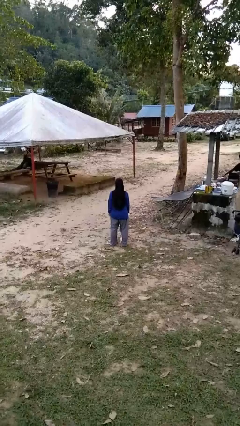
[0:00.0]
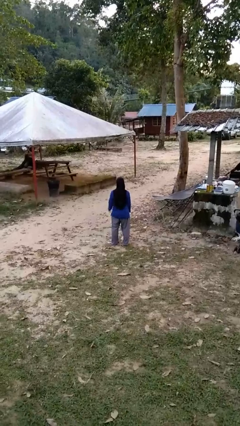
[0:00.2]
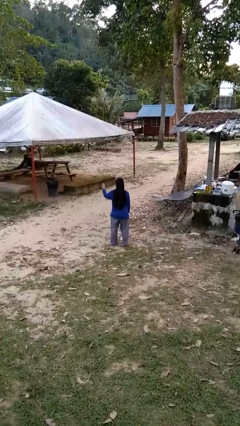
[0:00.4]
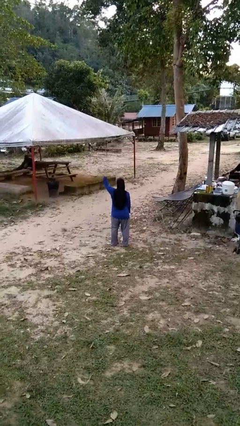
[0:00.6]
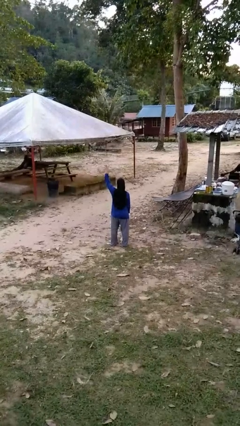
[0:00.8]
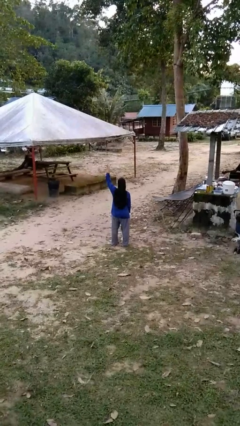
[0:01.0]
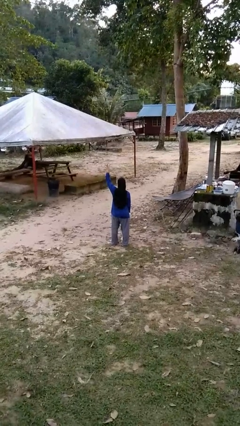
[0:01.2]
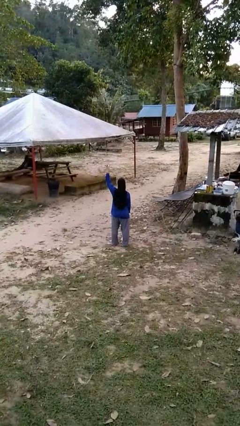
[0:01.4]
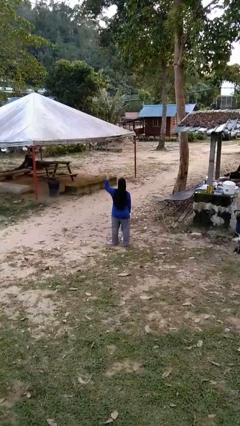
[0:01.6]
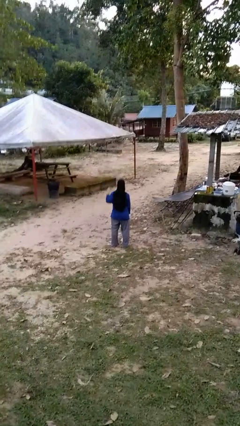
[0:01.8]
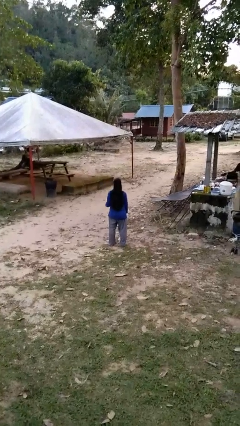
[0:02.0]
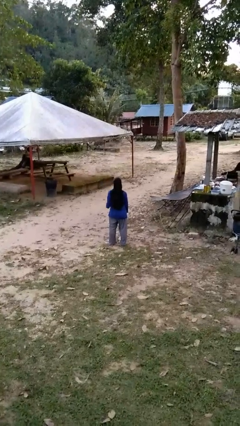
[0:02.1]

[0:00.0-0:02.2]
person gestures number four

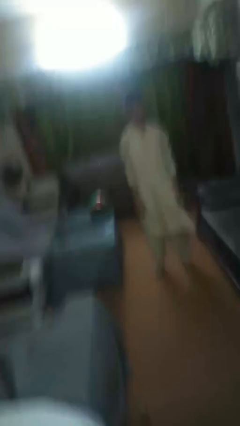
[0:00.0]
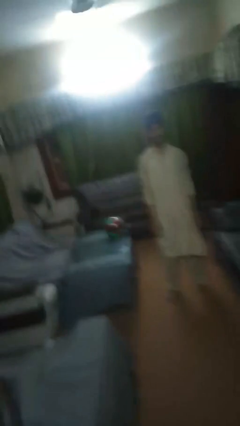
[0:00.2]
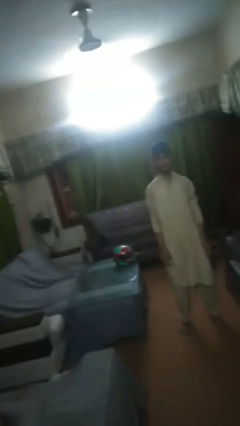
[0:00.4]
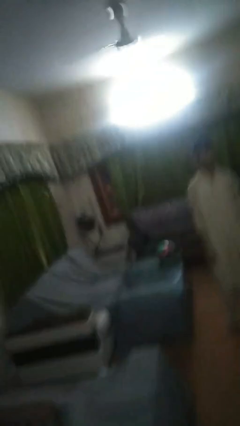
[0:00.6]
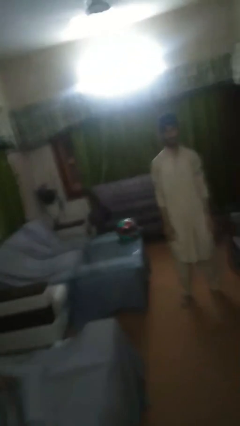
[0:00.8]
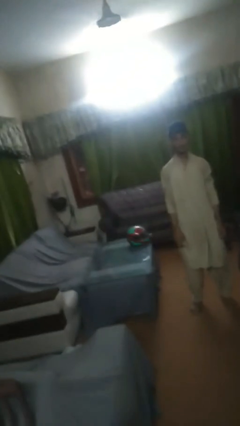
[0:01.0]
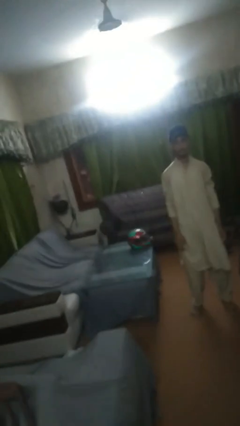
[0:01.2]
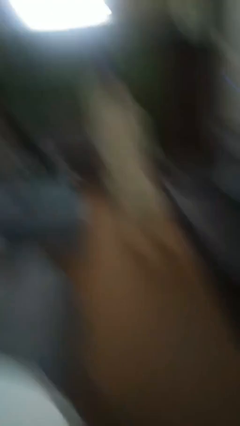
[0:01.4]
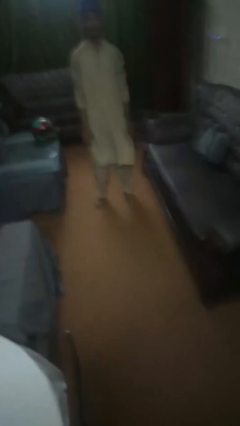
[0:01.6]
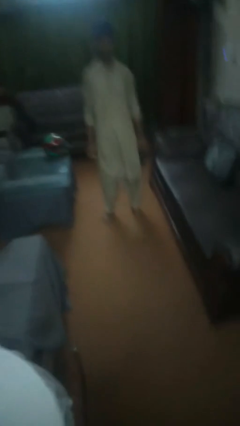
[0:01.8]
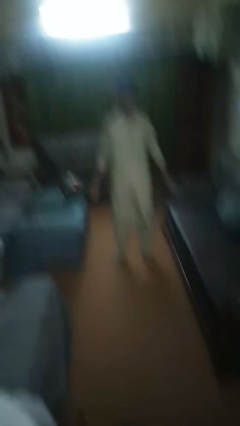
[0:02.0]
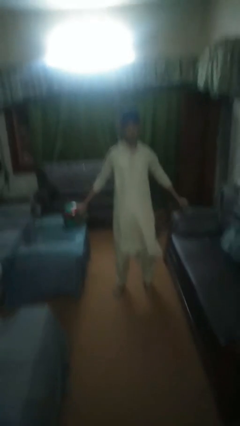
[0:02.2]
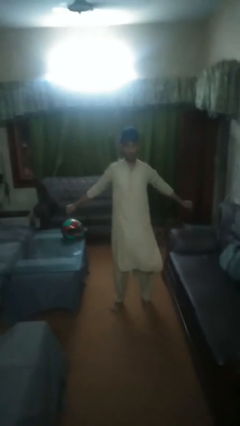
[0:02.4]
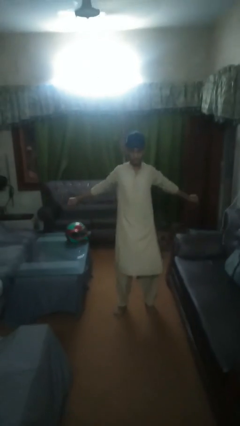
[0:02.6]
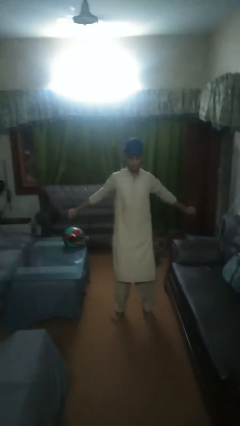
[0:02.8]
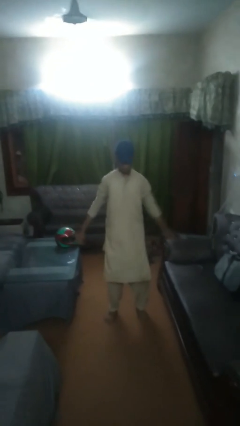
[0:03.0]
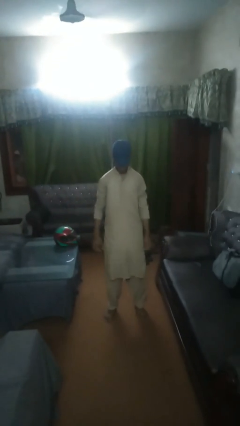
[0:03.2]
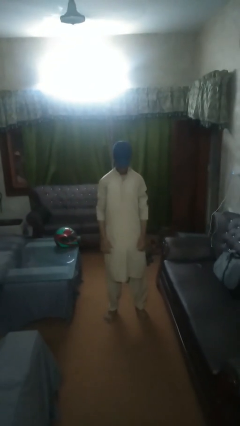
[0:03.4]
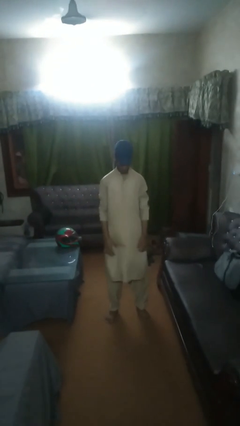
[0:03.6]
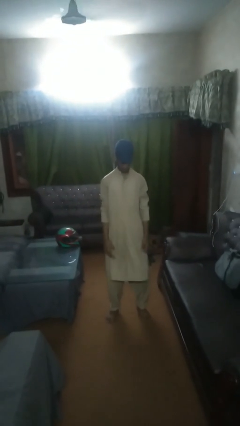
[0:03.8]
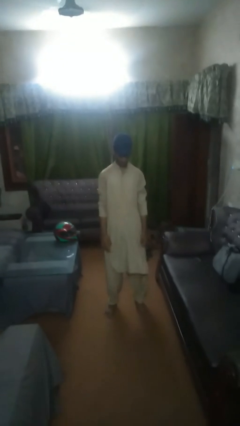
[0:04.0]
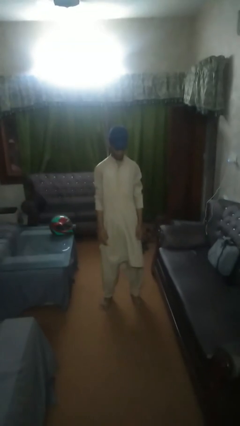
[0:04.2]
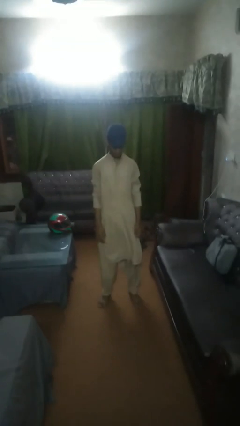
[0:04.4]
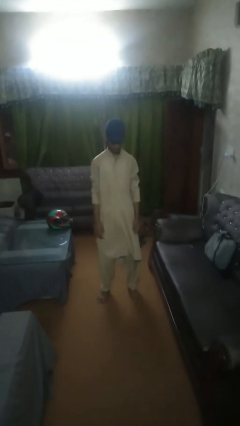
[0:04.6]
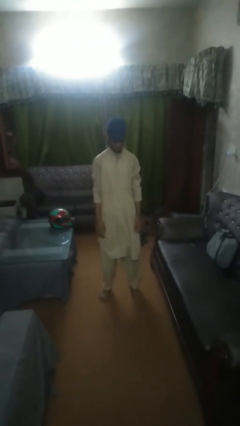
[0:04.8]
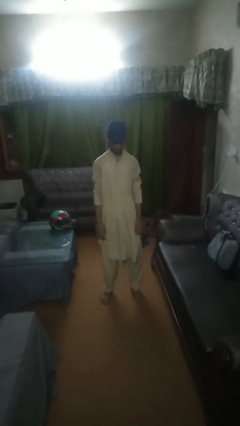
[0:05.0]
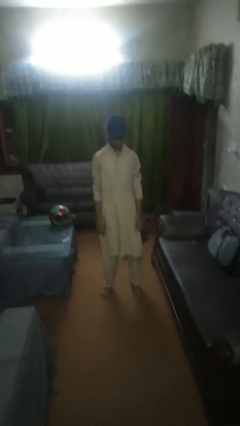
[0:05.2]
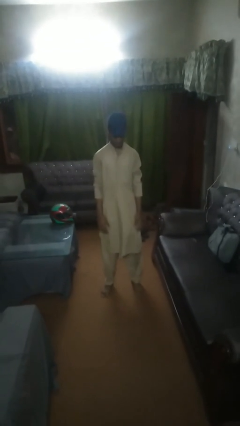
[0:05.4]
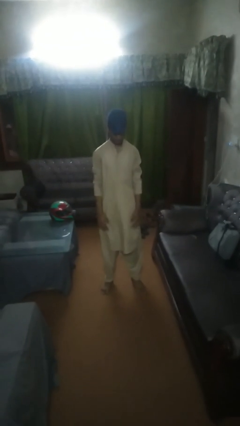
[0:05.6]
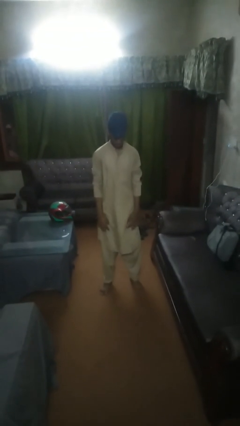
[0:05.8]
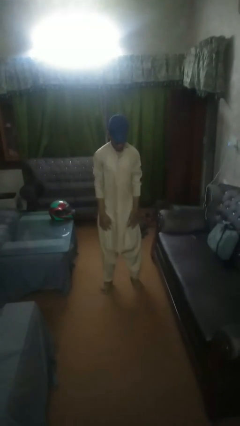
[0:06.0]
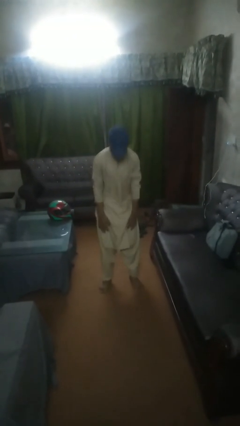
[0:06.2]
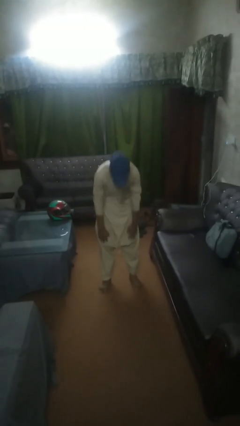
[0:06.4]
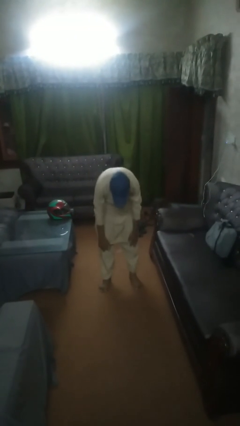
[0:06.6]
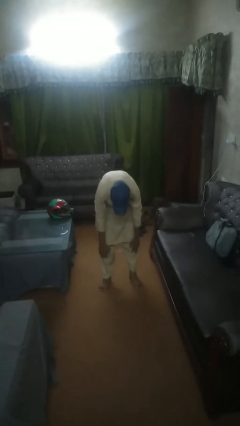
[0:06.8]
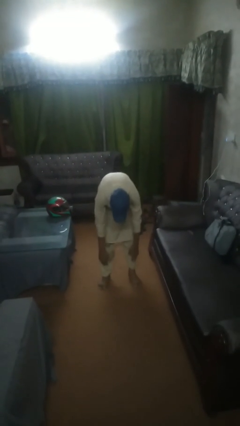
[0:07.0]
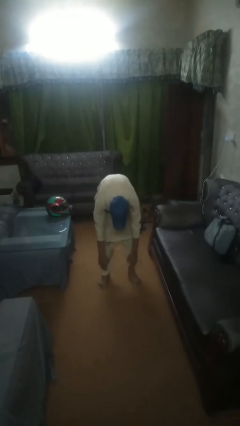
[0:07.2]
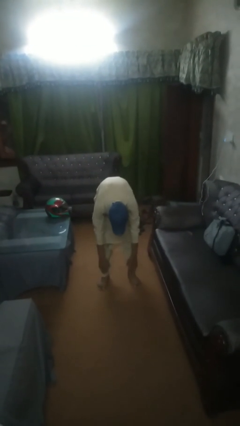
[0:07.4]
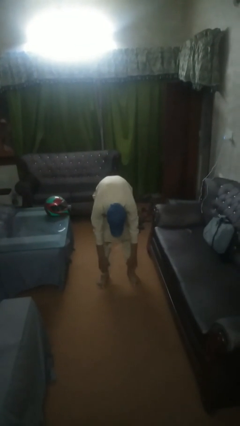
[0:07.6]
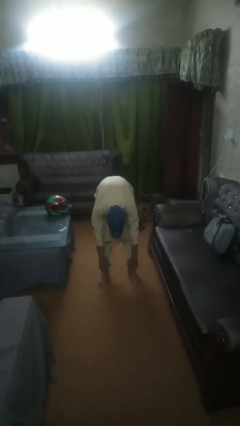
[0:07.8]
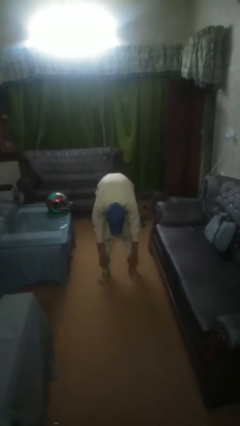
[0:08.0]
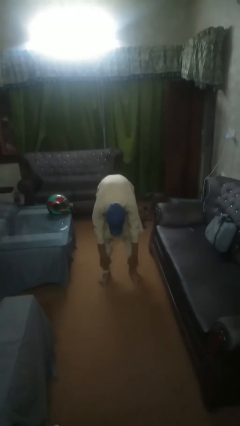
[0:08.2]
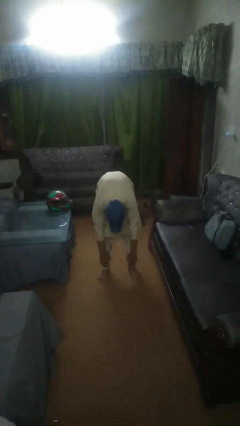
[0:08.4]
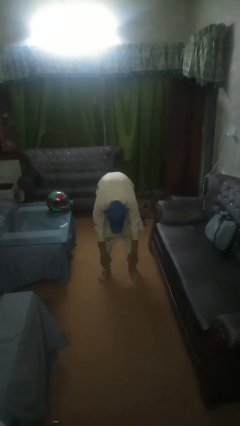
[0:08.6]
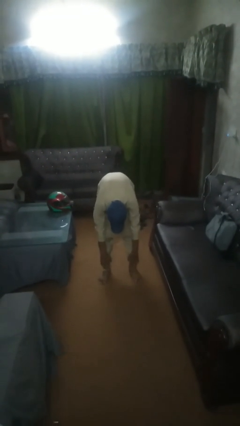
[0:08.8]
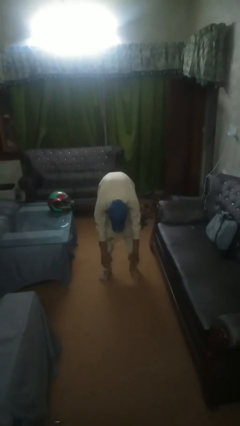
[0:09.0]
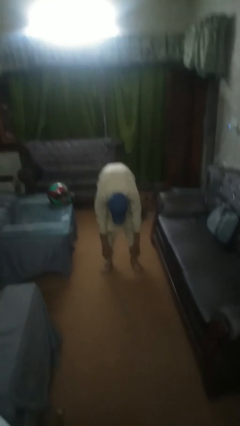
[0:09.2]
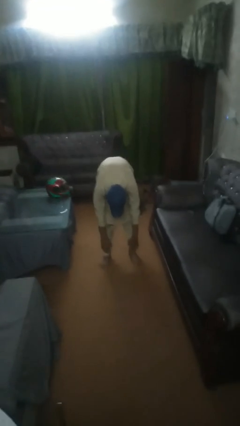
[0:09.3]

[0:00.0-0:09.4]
person exercises with plank

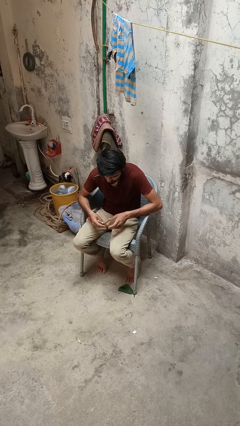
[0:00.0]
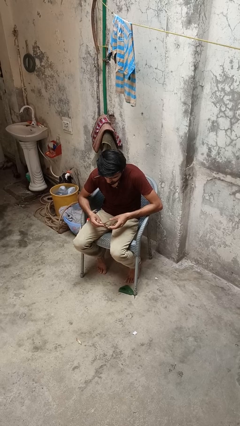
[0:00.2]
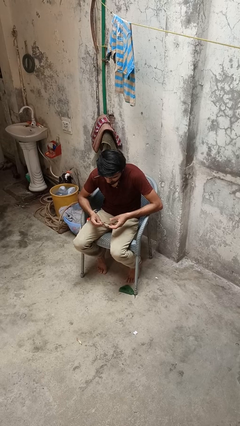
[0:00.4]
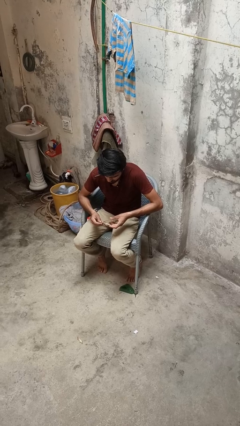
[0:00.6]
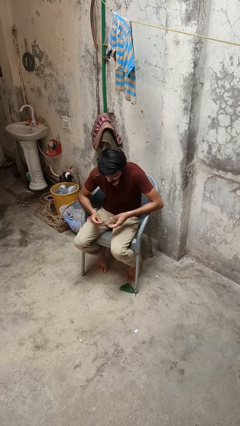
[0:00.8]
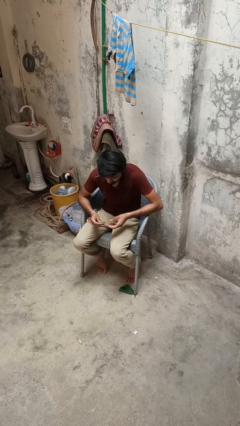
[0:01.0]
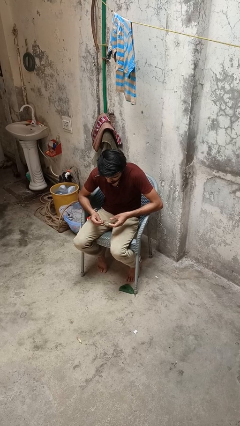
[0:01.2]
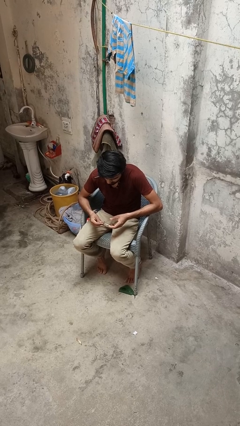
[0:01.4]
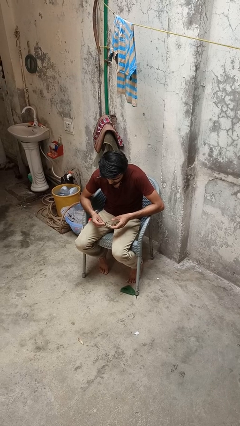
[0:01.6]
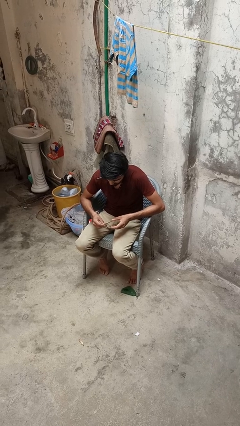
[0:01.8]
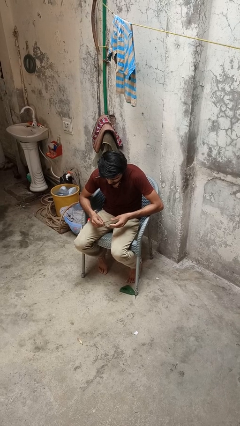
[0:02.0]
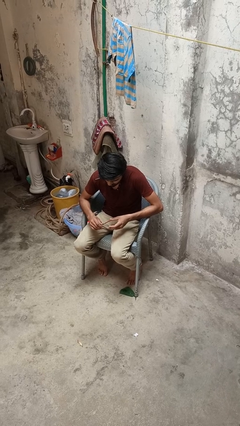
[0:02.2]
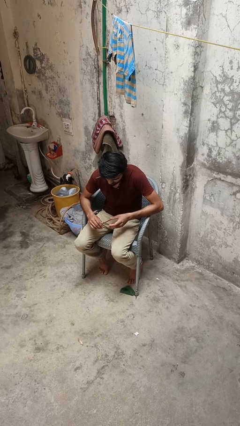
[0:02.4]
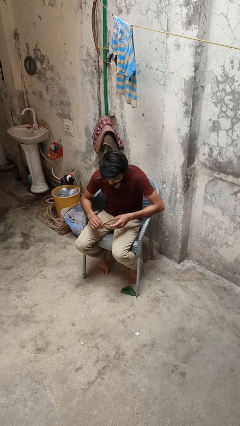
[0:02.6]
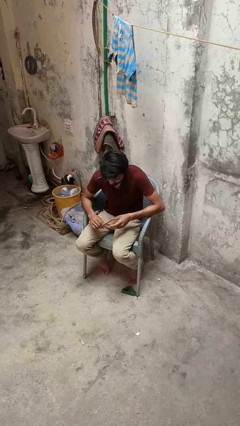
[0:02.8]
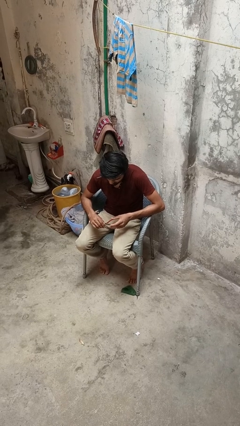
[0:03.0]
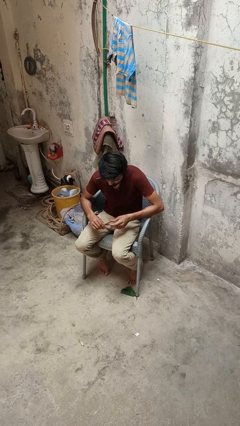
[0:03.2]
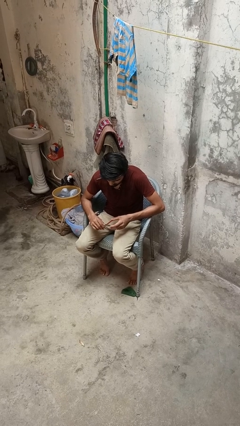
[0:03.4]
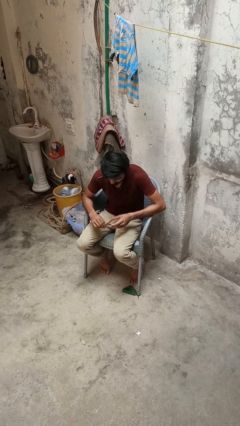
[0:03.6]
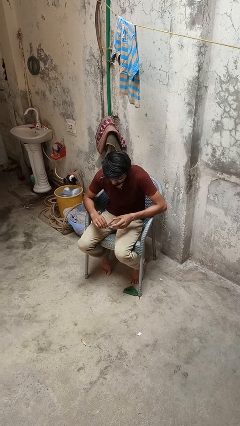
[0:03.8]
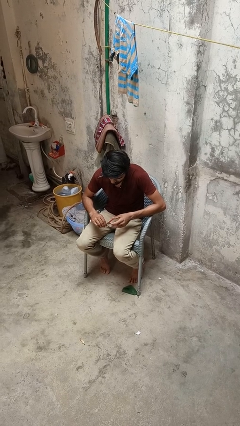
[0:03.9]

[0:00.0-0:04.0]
person clips fingernails

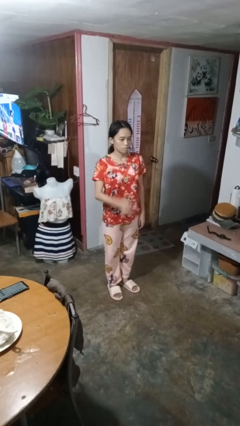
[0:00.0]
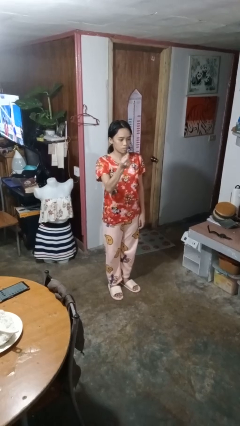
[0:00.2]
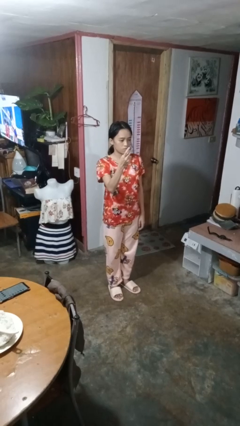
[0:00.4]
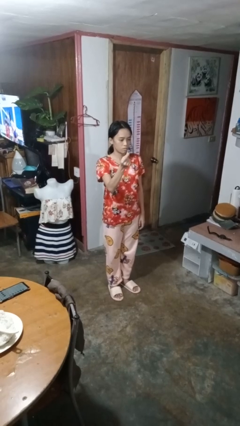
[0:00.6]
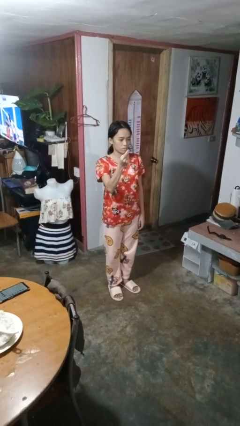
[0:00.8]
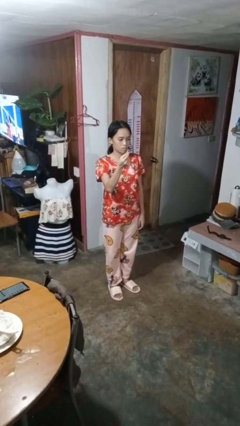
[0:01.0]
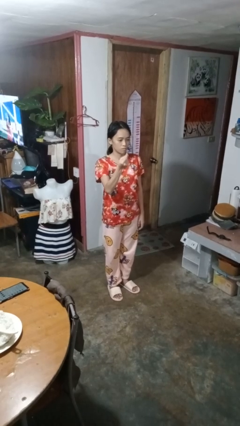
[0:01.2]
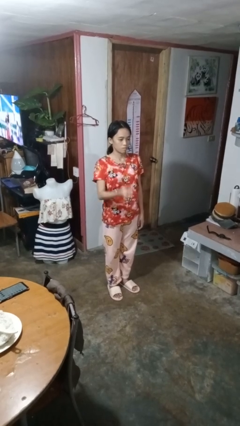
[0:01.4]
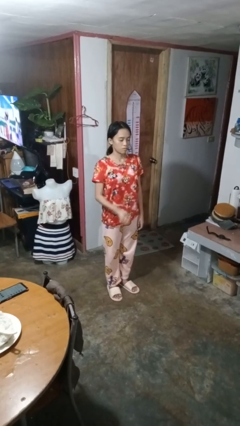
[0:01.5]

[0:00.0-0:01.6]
person snaps fingers

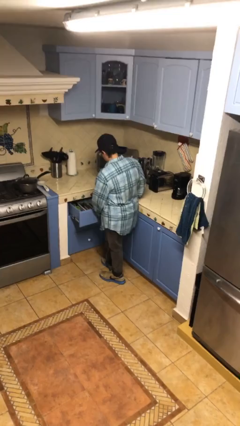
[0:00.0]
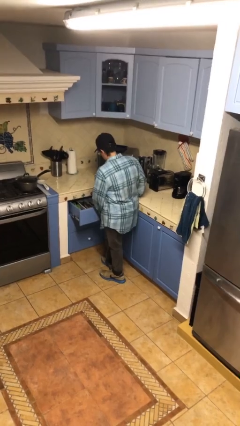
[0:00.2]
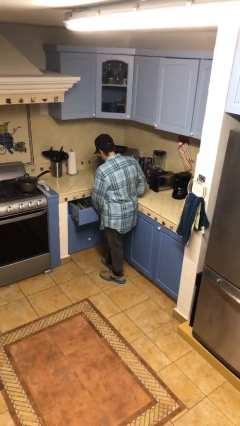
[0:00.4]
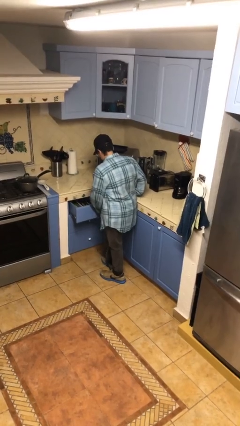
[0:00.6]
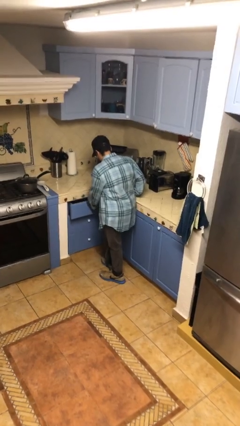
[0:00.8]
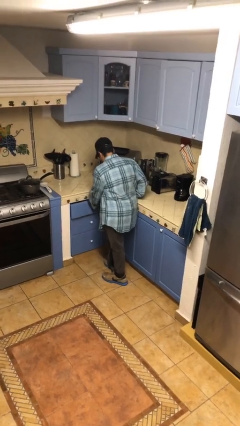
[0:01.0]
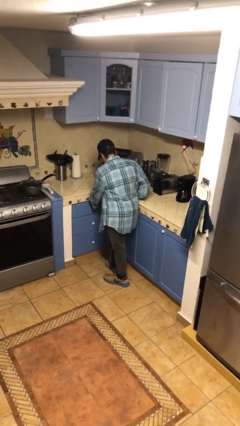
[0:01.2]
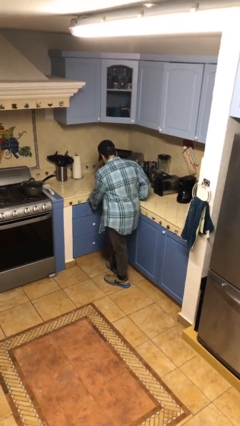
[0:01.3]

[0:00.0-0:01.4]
person closes kitchen drawer
